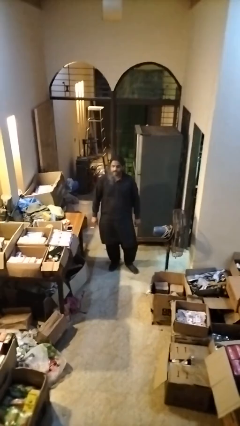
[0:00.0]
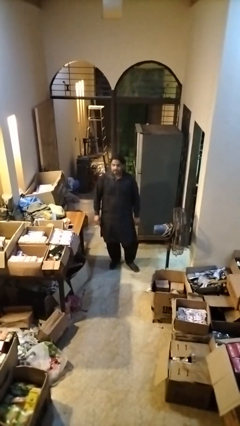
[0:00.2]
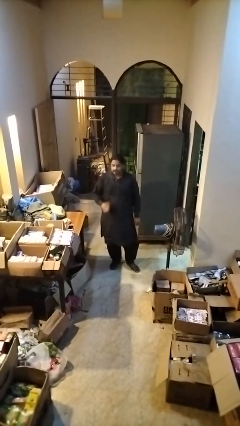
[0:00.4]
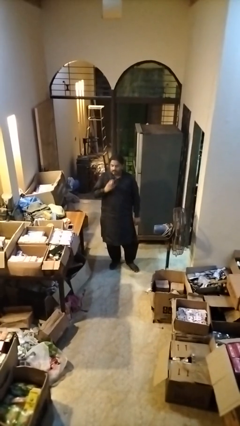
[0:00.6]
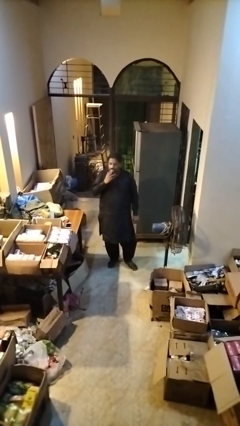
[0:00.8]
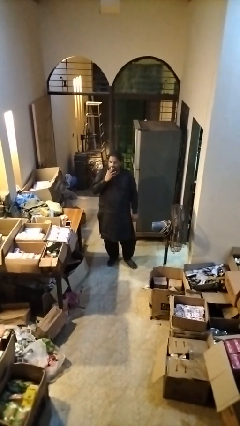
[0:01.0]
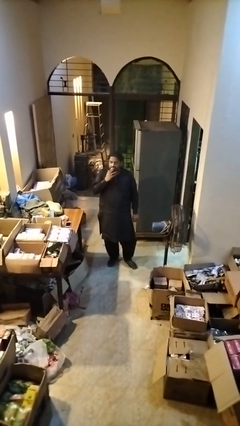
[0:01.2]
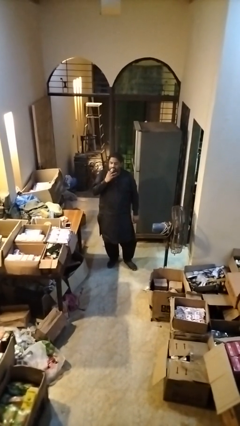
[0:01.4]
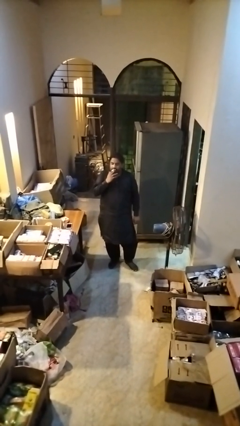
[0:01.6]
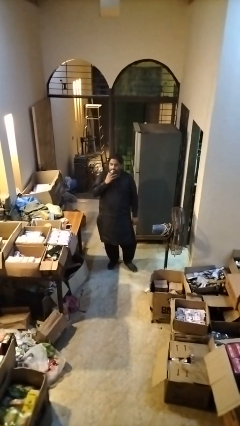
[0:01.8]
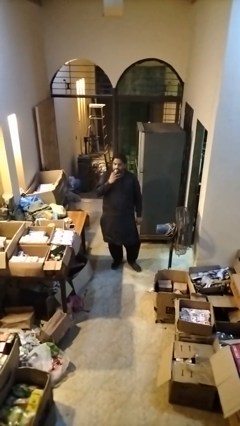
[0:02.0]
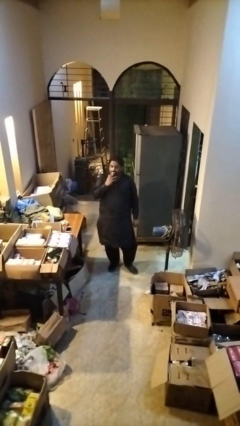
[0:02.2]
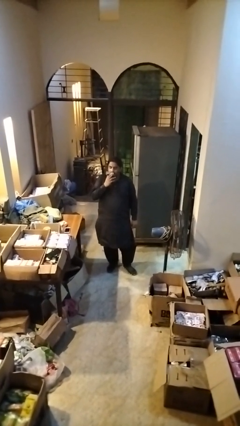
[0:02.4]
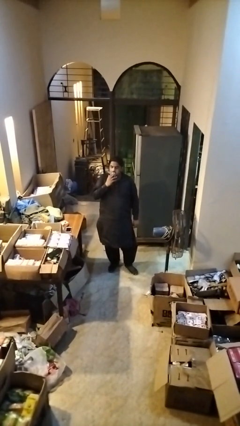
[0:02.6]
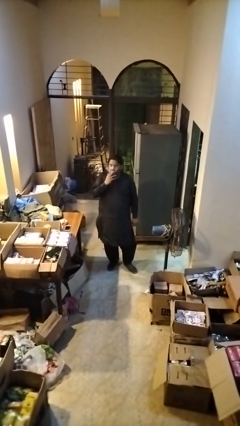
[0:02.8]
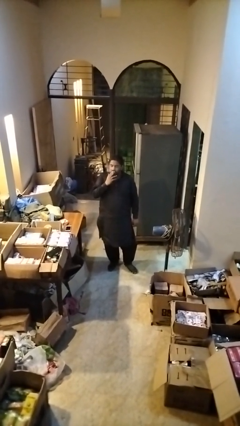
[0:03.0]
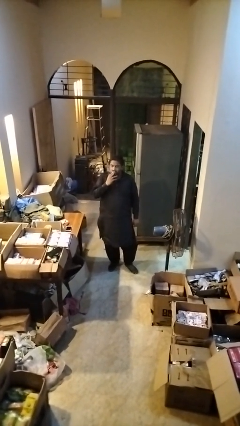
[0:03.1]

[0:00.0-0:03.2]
person vapes

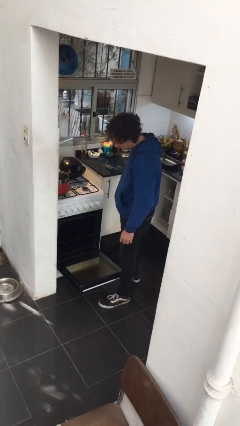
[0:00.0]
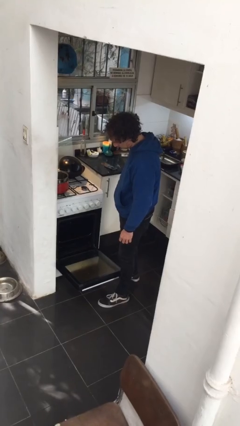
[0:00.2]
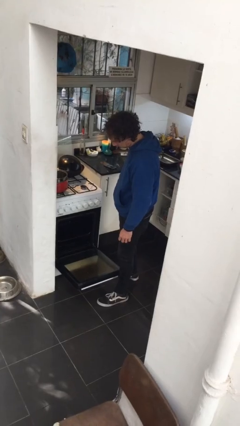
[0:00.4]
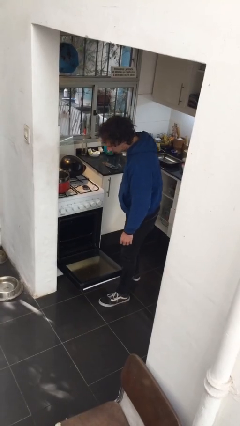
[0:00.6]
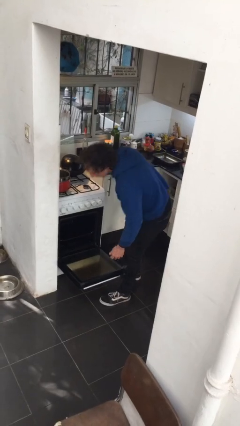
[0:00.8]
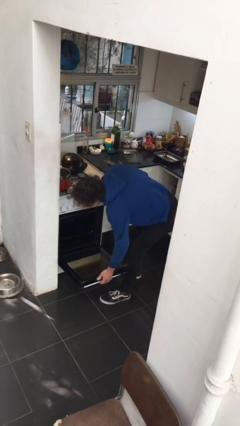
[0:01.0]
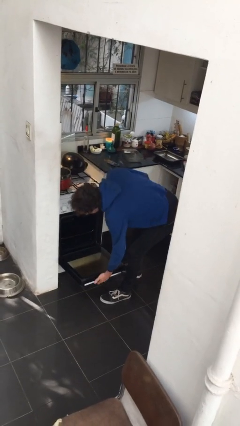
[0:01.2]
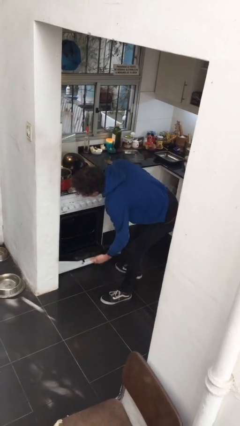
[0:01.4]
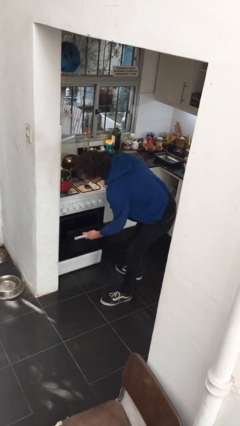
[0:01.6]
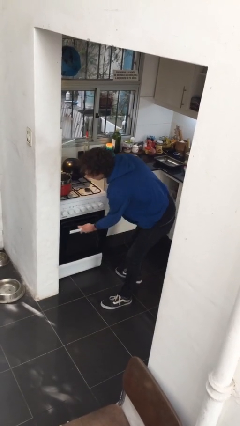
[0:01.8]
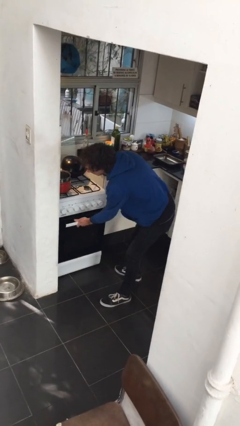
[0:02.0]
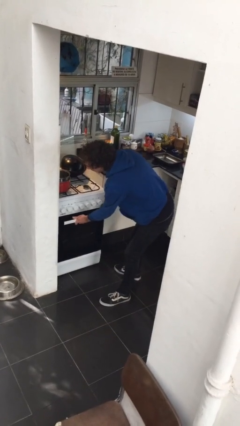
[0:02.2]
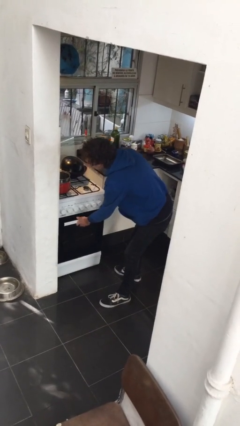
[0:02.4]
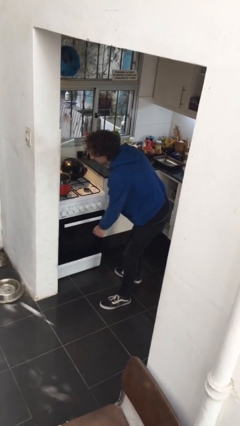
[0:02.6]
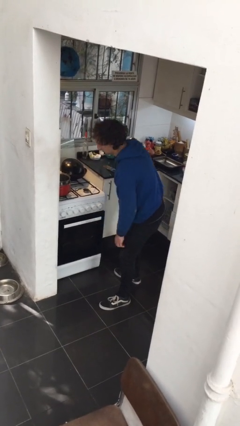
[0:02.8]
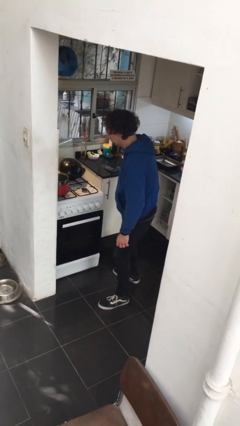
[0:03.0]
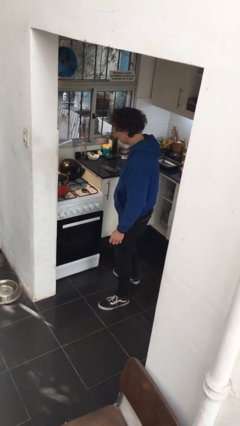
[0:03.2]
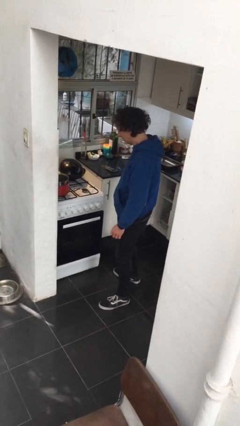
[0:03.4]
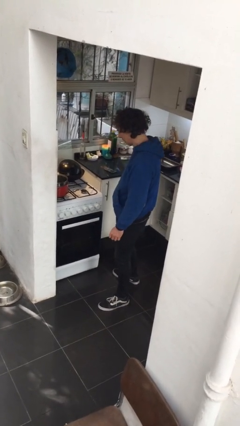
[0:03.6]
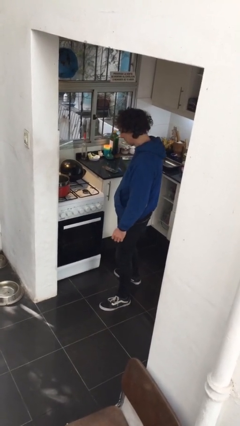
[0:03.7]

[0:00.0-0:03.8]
person closes oven door

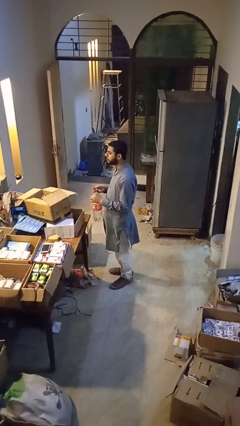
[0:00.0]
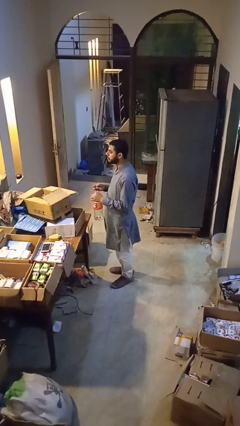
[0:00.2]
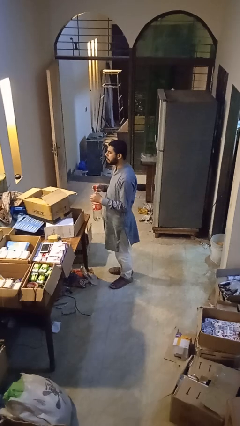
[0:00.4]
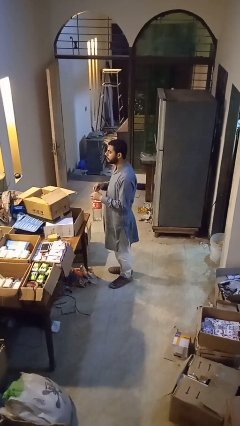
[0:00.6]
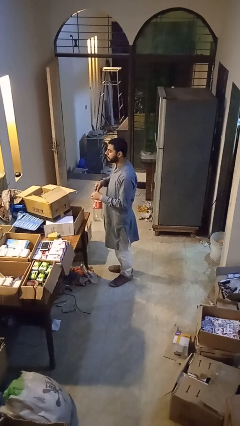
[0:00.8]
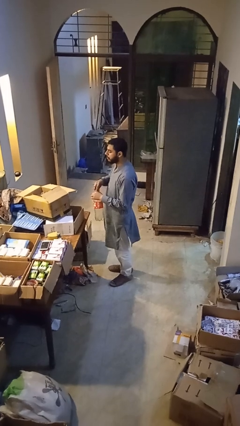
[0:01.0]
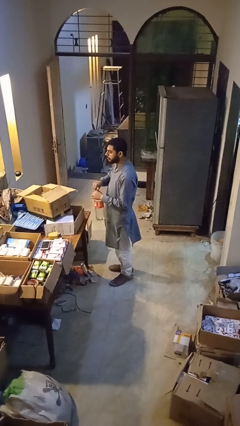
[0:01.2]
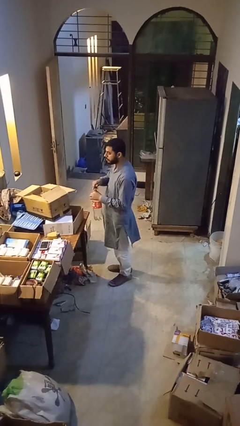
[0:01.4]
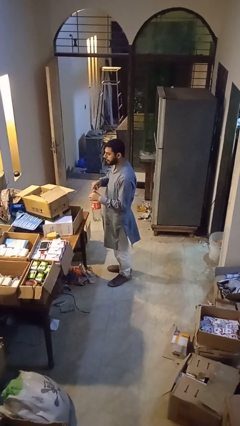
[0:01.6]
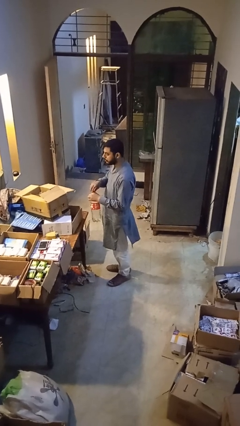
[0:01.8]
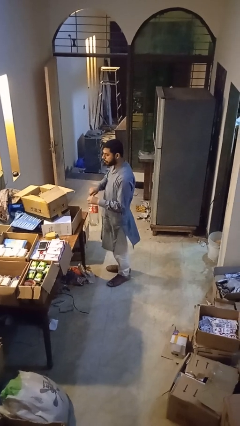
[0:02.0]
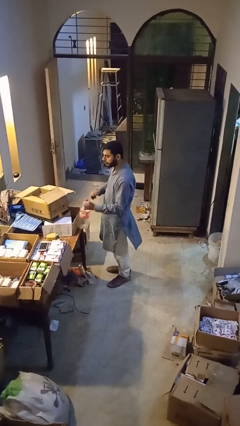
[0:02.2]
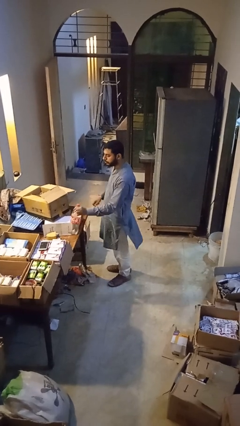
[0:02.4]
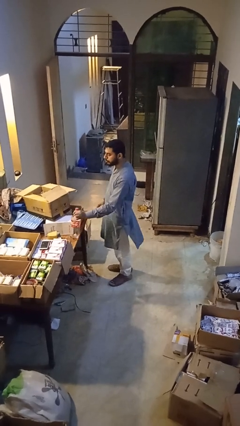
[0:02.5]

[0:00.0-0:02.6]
person screws lid to bottle

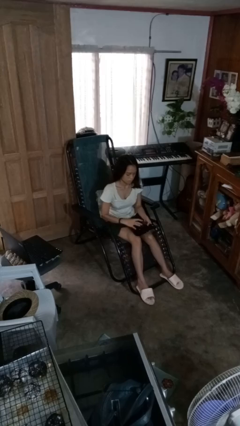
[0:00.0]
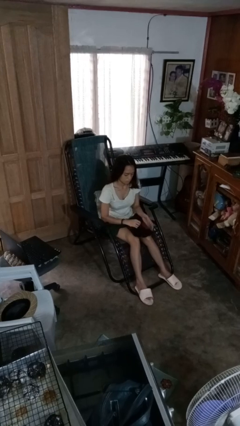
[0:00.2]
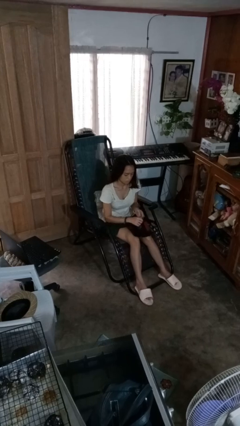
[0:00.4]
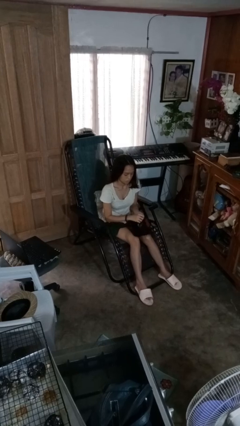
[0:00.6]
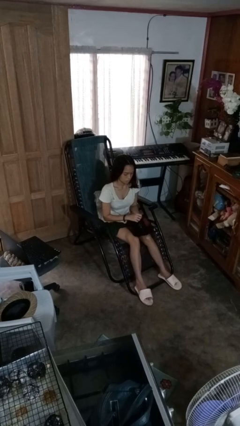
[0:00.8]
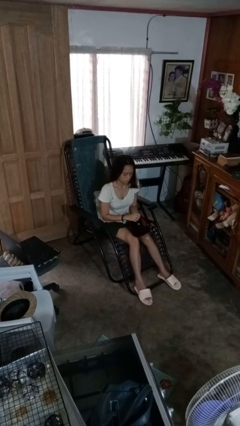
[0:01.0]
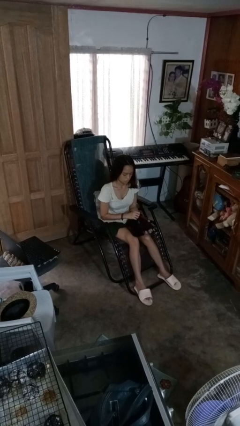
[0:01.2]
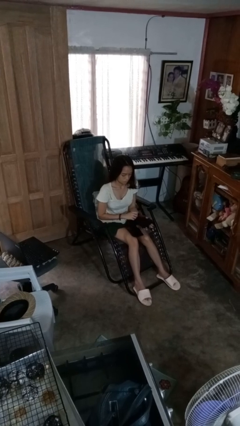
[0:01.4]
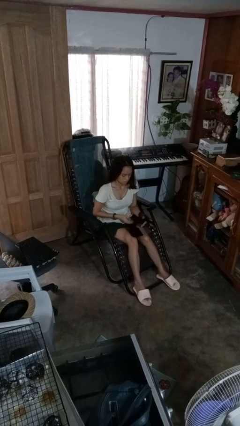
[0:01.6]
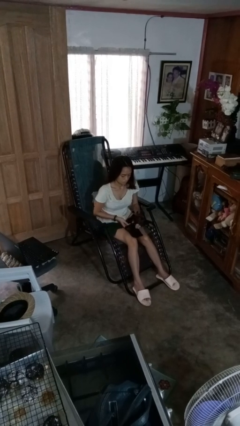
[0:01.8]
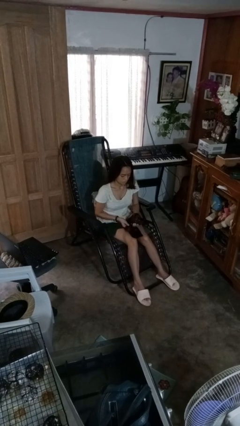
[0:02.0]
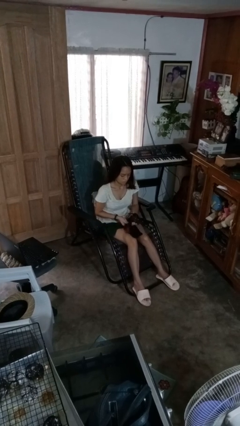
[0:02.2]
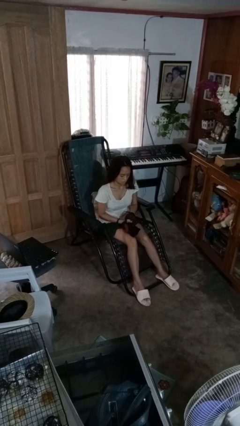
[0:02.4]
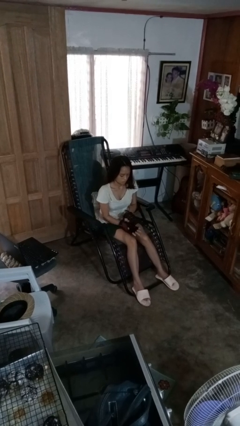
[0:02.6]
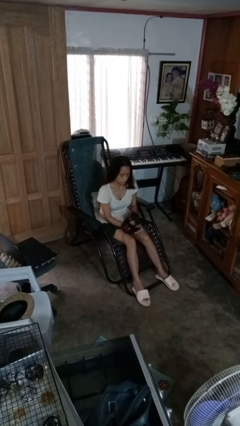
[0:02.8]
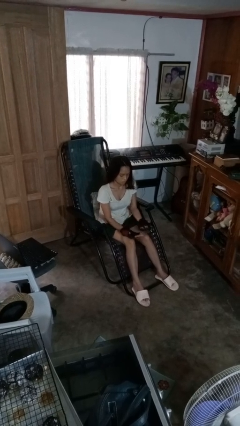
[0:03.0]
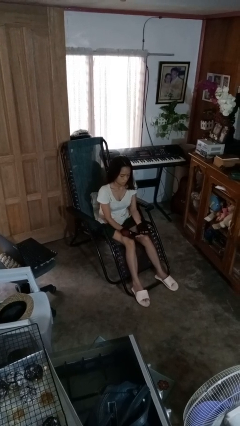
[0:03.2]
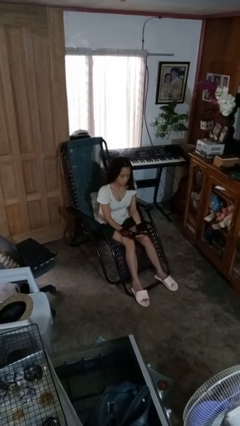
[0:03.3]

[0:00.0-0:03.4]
person puts on gloves

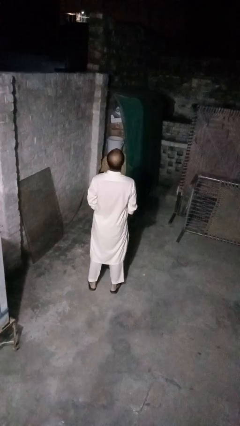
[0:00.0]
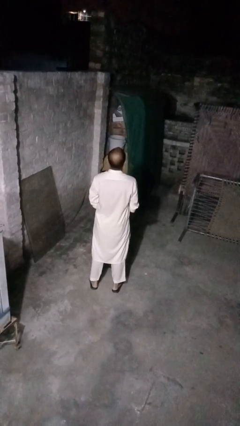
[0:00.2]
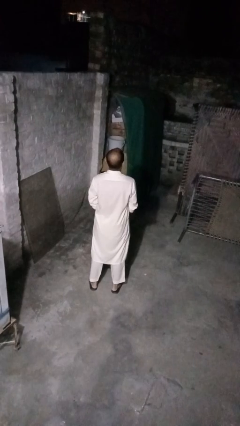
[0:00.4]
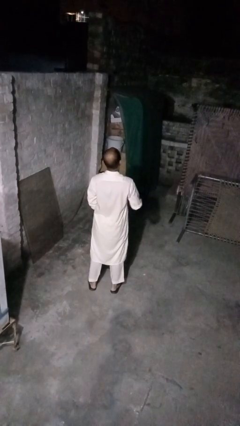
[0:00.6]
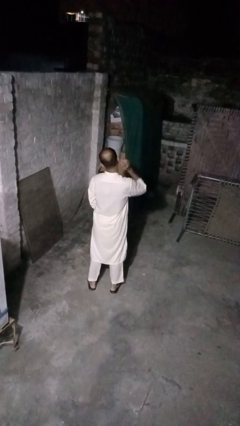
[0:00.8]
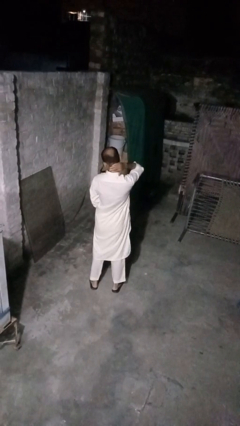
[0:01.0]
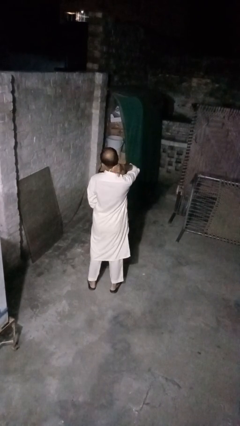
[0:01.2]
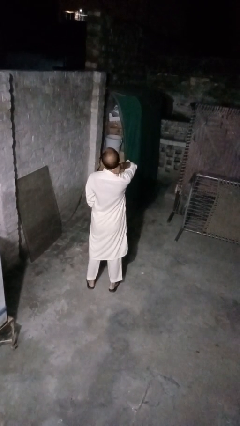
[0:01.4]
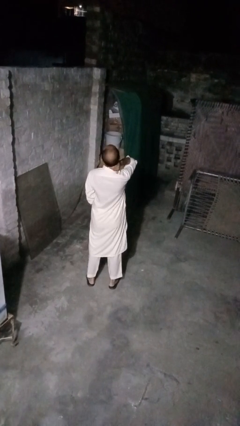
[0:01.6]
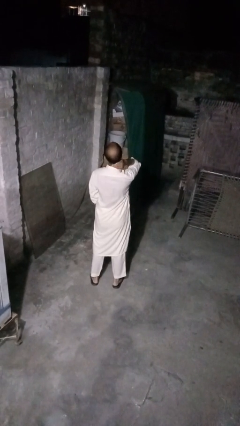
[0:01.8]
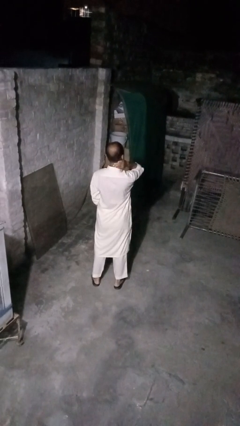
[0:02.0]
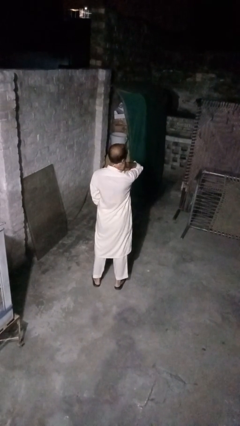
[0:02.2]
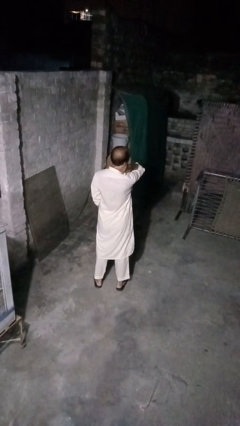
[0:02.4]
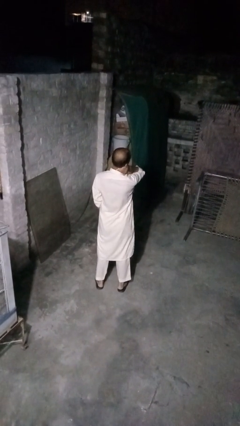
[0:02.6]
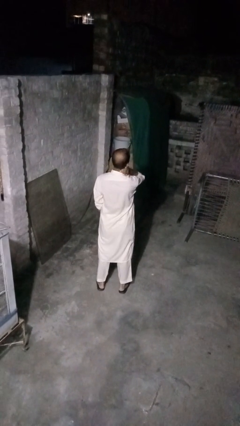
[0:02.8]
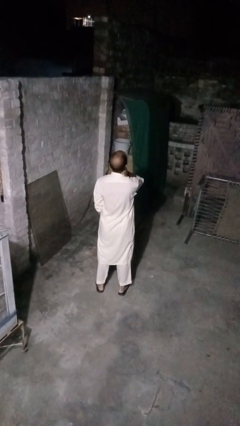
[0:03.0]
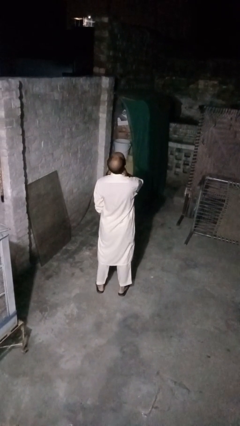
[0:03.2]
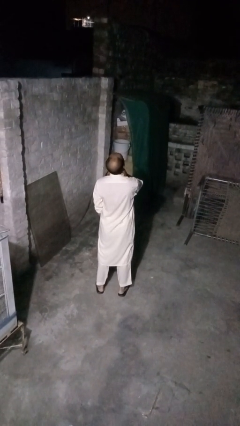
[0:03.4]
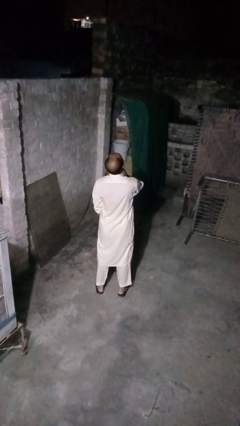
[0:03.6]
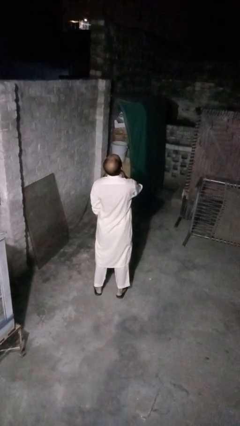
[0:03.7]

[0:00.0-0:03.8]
person rubs neck

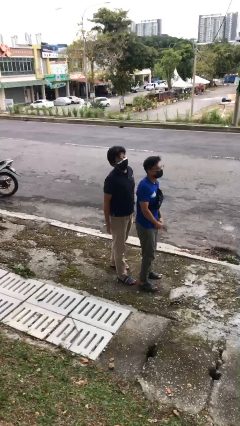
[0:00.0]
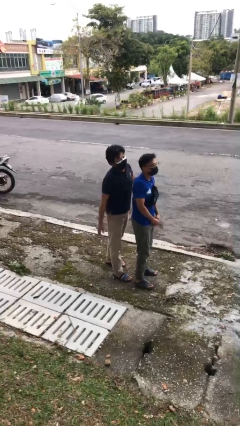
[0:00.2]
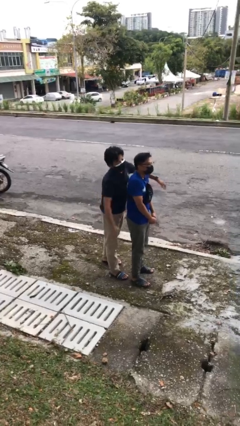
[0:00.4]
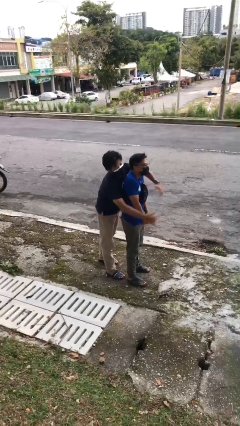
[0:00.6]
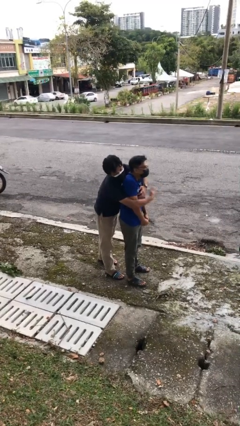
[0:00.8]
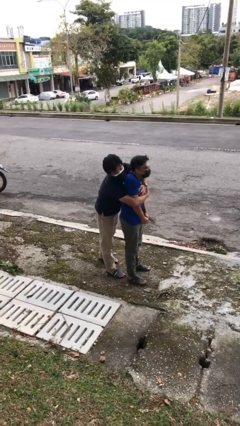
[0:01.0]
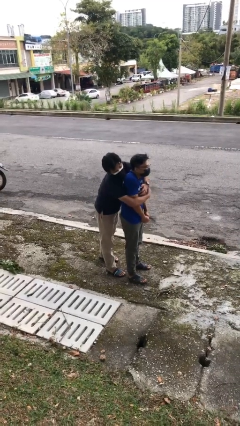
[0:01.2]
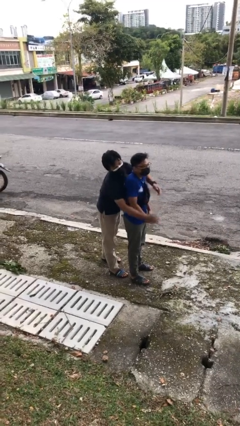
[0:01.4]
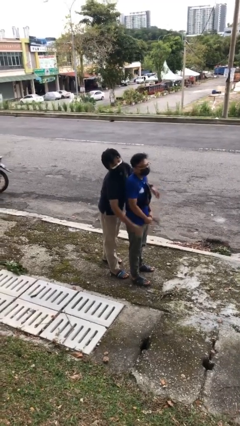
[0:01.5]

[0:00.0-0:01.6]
person hugs person from behind
